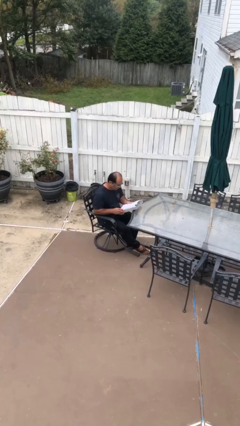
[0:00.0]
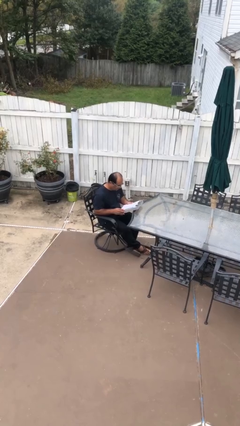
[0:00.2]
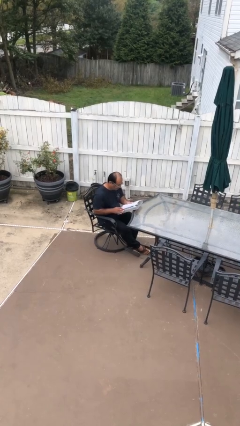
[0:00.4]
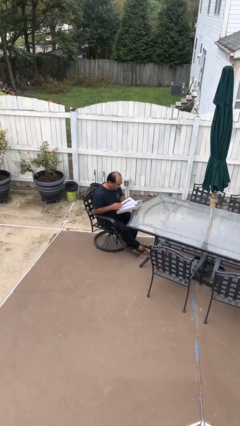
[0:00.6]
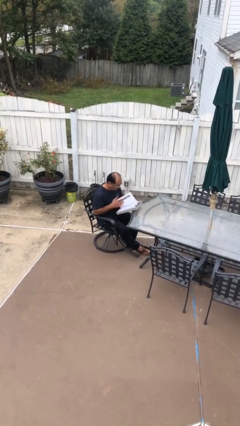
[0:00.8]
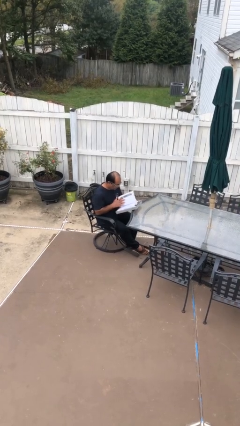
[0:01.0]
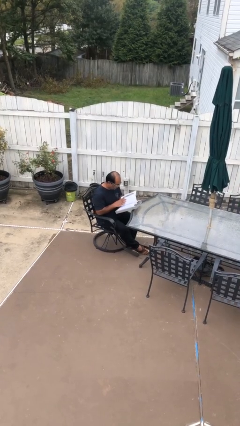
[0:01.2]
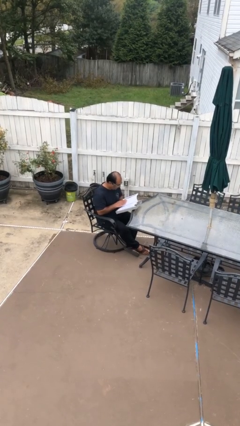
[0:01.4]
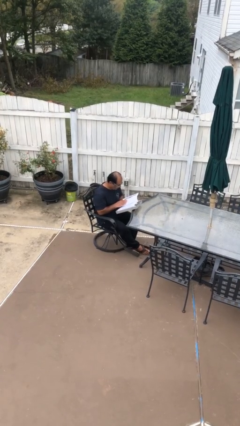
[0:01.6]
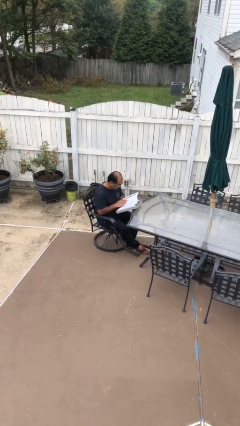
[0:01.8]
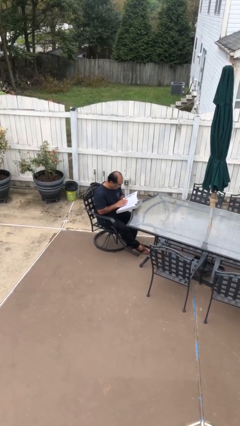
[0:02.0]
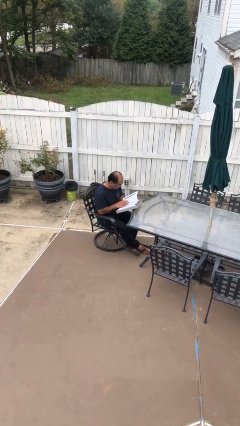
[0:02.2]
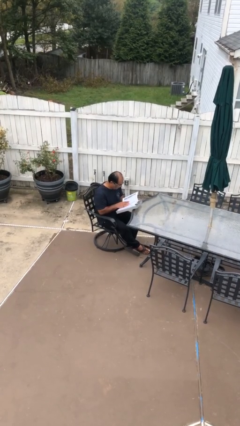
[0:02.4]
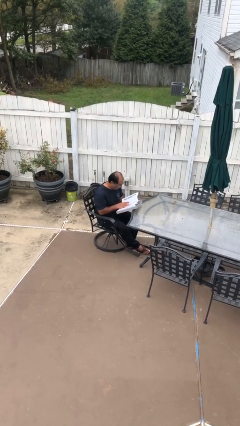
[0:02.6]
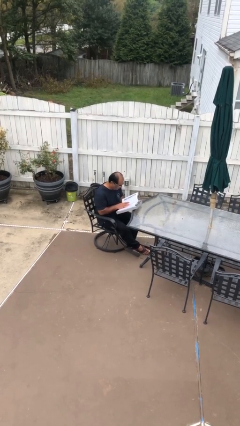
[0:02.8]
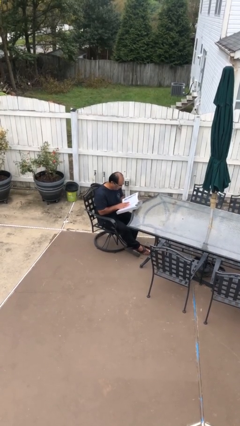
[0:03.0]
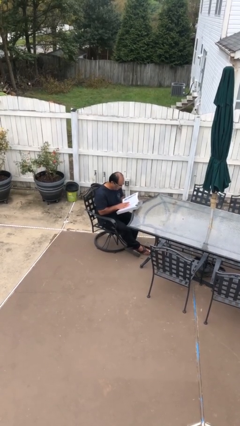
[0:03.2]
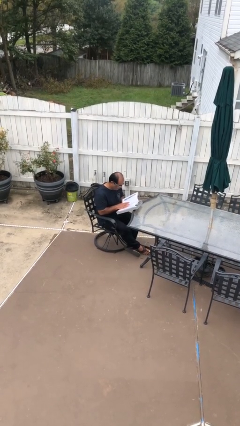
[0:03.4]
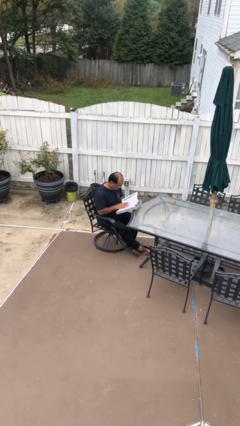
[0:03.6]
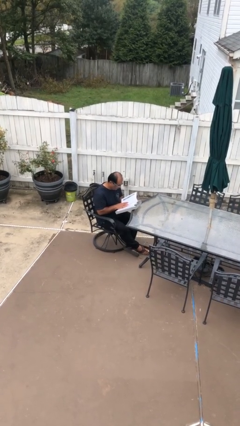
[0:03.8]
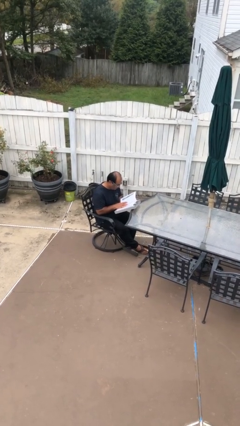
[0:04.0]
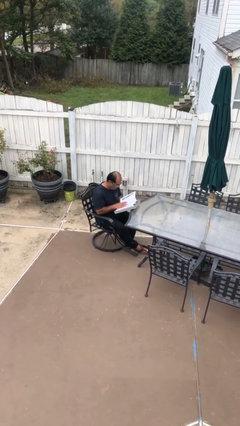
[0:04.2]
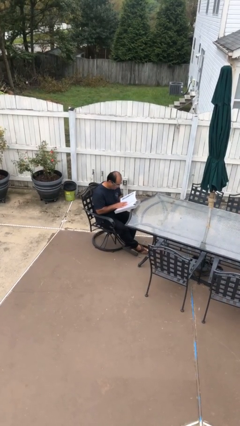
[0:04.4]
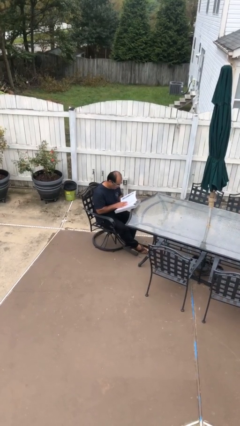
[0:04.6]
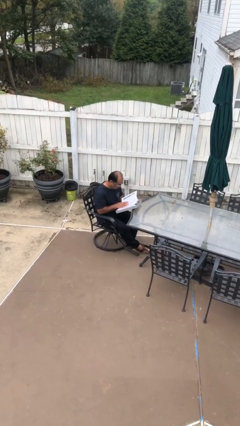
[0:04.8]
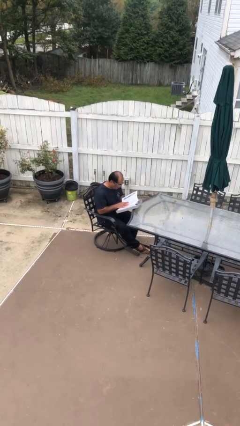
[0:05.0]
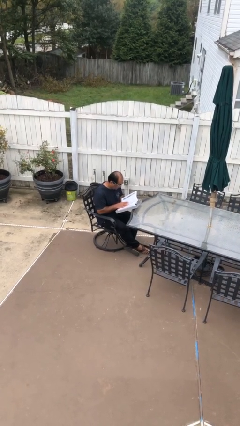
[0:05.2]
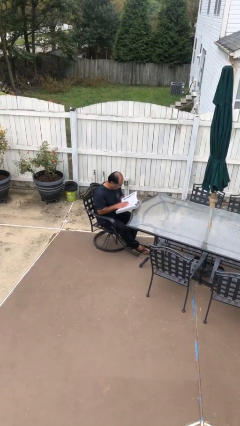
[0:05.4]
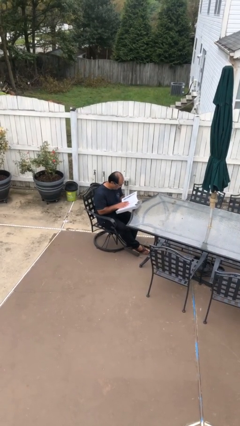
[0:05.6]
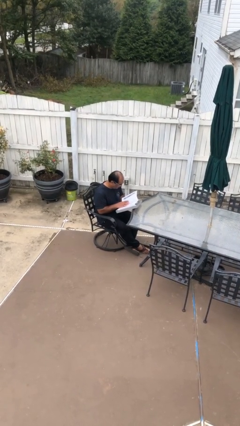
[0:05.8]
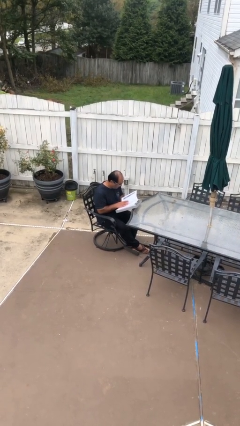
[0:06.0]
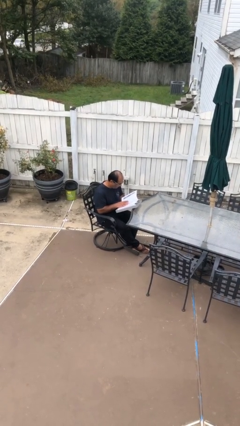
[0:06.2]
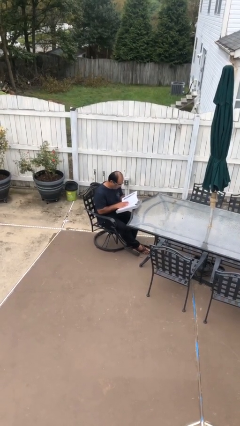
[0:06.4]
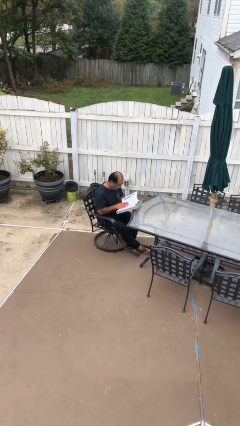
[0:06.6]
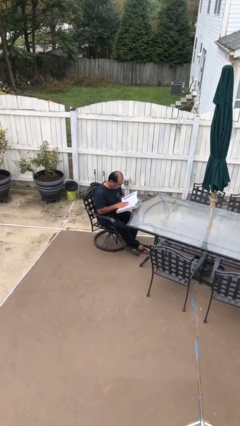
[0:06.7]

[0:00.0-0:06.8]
person reads document

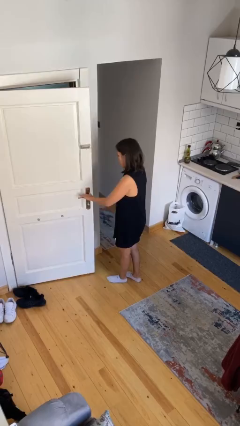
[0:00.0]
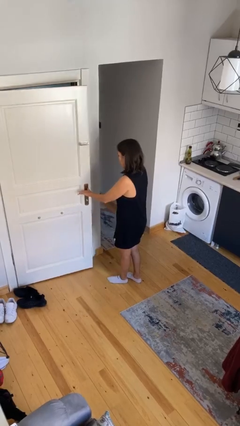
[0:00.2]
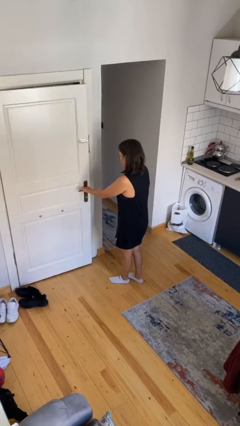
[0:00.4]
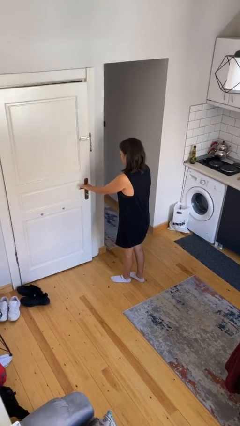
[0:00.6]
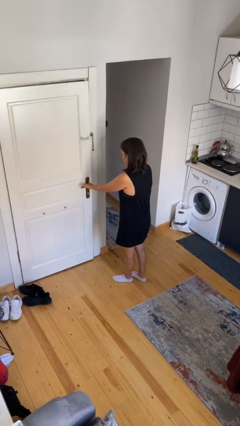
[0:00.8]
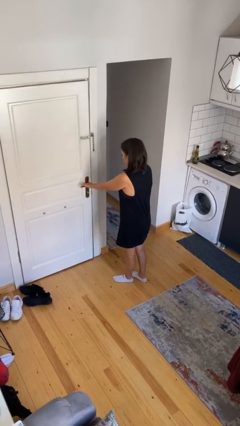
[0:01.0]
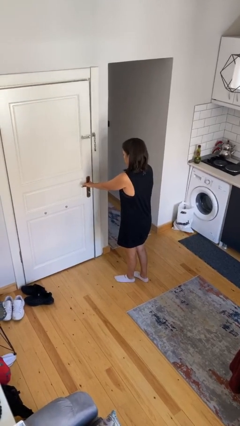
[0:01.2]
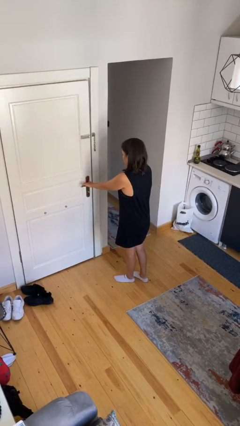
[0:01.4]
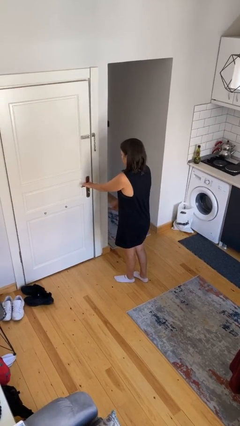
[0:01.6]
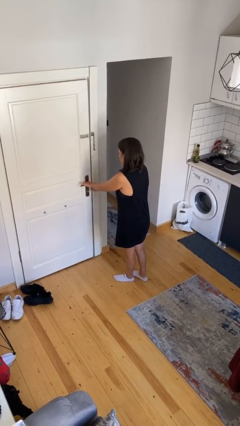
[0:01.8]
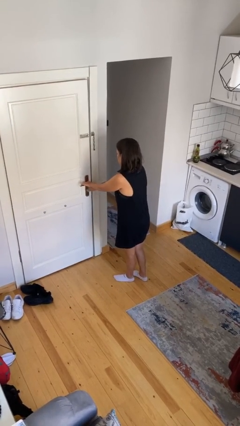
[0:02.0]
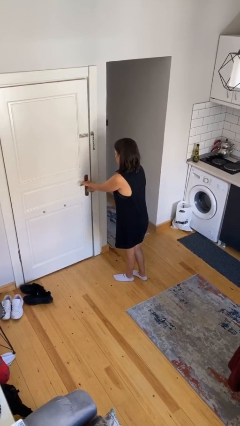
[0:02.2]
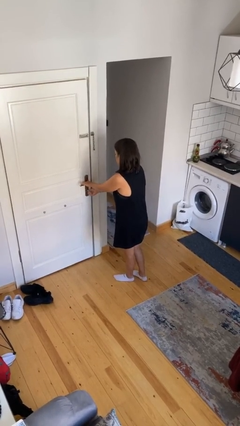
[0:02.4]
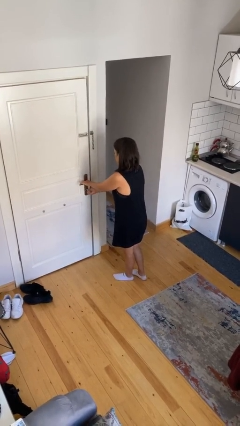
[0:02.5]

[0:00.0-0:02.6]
person locks door with keys

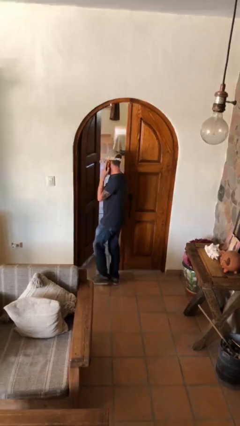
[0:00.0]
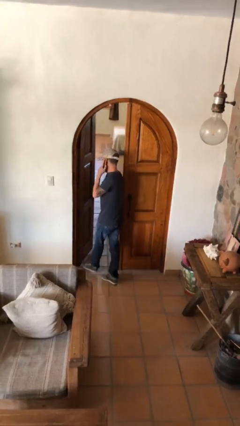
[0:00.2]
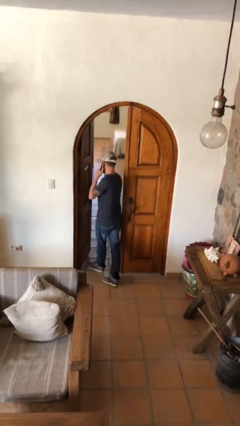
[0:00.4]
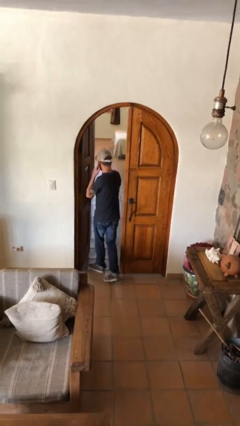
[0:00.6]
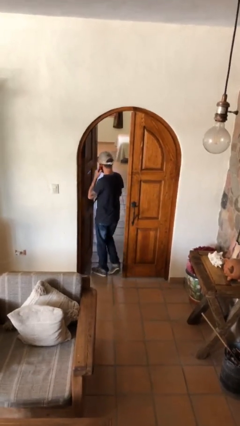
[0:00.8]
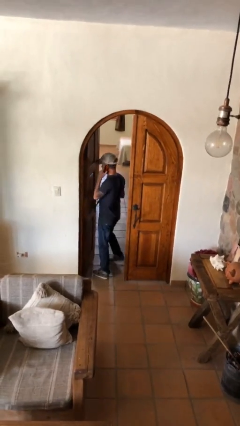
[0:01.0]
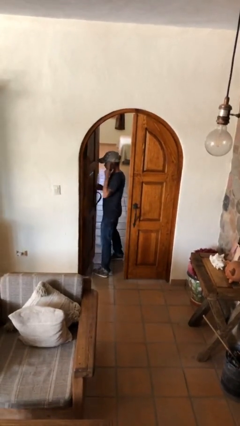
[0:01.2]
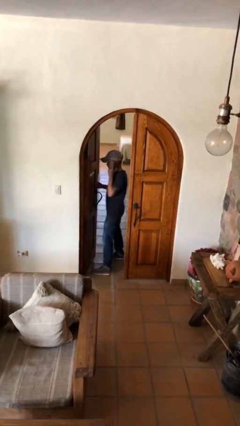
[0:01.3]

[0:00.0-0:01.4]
person exits scene through structure

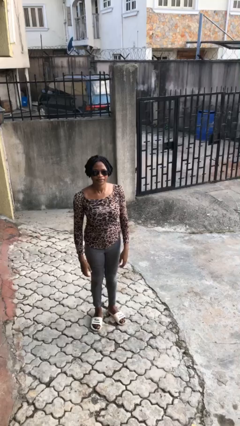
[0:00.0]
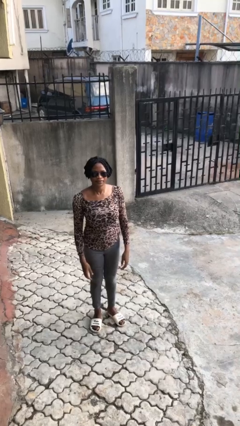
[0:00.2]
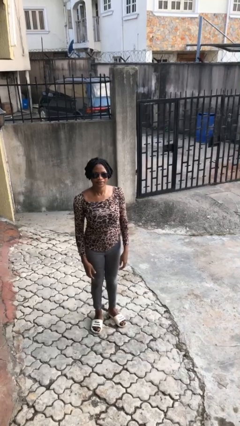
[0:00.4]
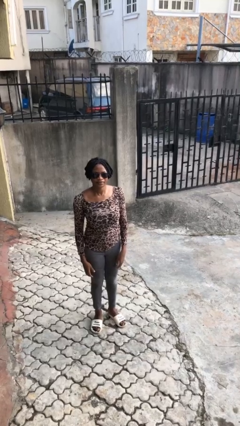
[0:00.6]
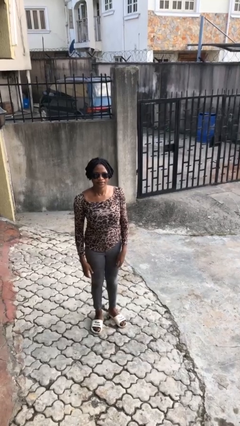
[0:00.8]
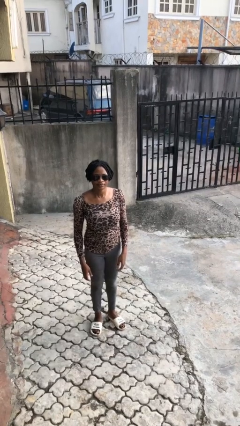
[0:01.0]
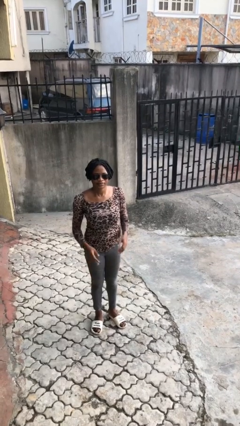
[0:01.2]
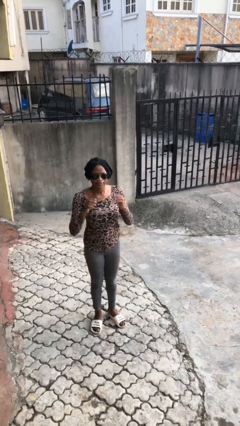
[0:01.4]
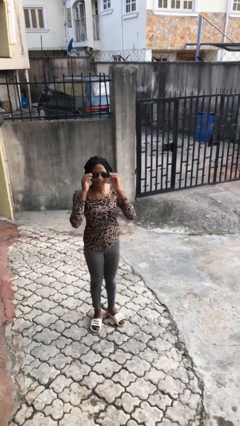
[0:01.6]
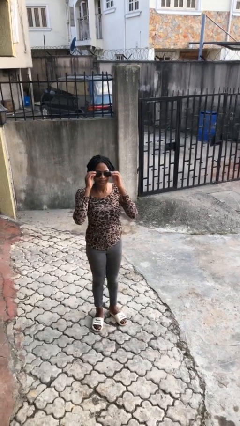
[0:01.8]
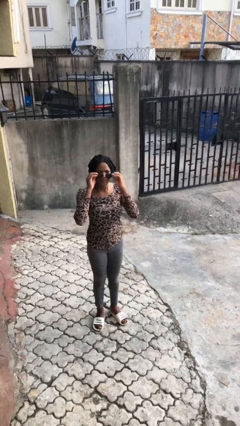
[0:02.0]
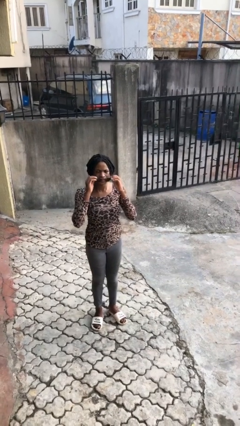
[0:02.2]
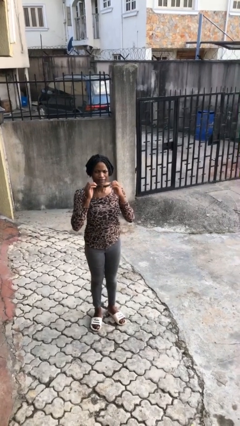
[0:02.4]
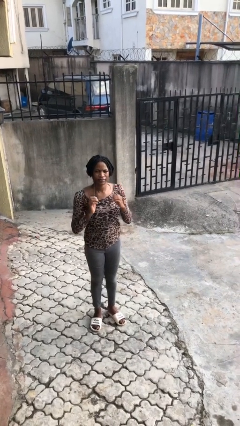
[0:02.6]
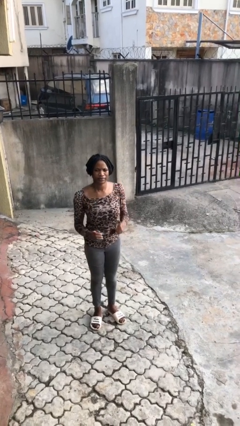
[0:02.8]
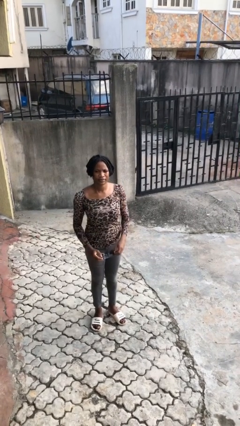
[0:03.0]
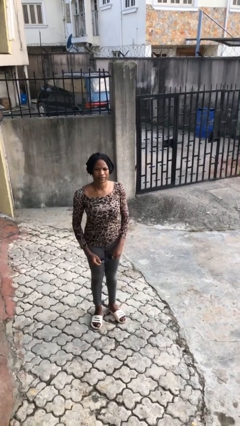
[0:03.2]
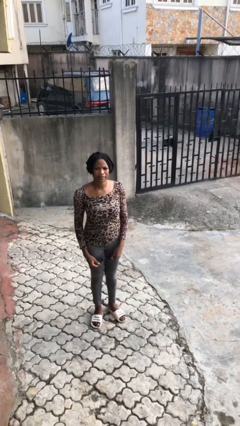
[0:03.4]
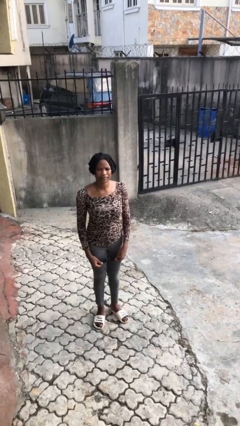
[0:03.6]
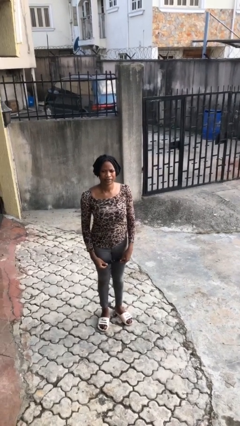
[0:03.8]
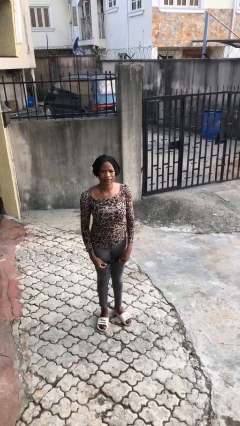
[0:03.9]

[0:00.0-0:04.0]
person takes off sunglasses

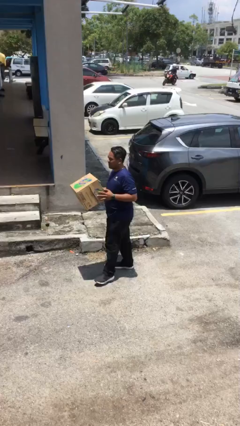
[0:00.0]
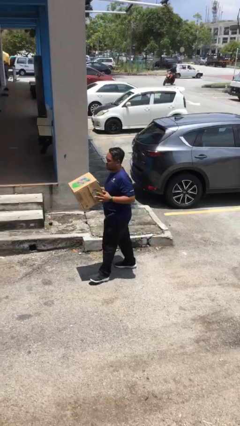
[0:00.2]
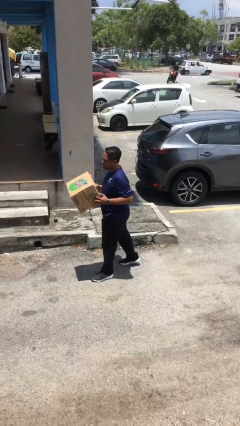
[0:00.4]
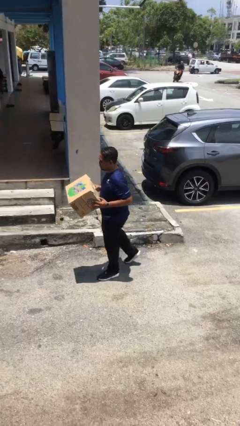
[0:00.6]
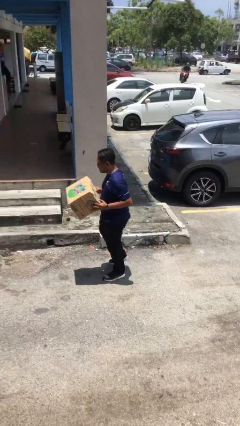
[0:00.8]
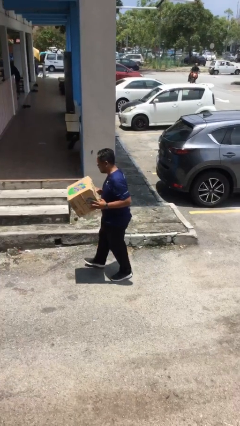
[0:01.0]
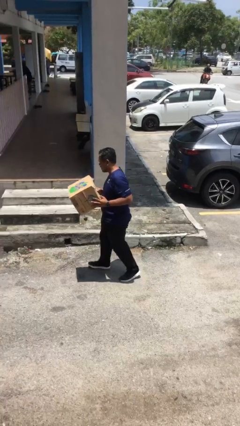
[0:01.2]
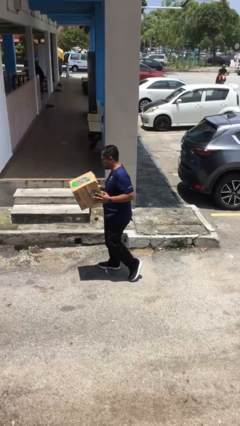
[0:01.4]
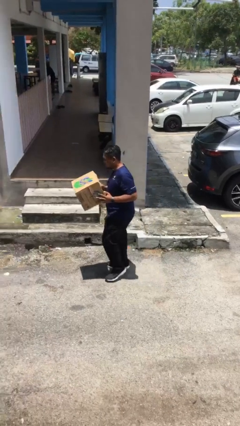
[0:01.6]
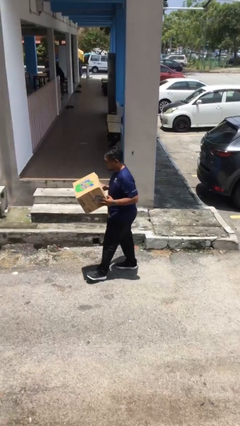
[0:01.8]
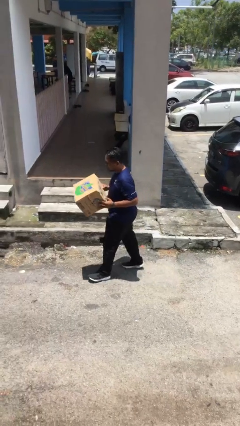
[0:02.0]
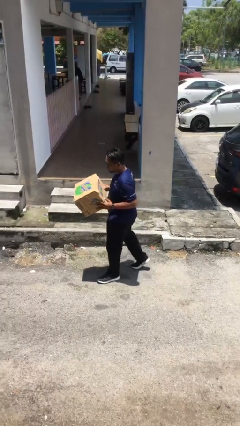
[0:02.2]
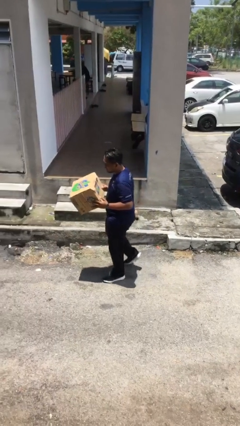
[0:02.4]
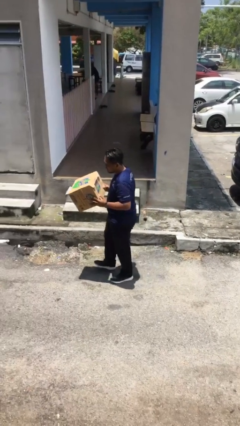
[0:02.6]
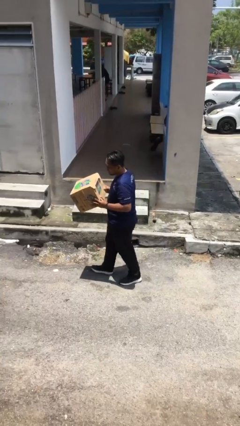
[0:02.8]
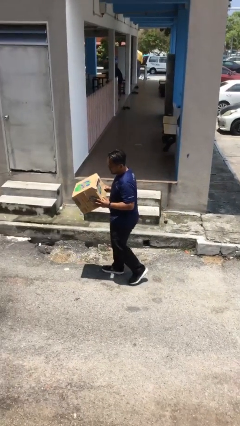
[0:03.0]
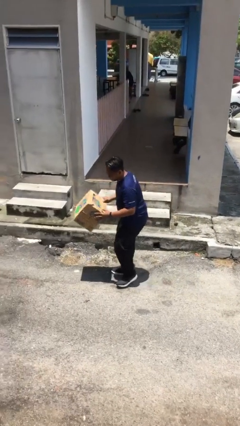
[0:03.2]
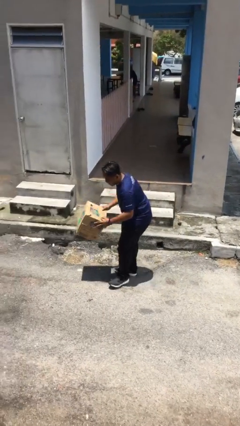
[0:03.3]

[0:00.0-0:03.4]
person carries heavy object
